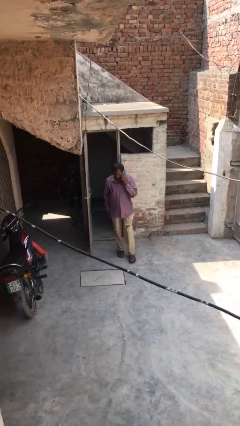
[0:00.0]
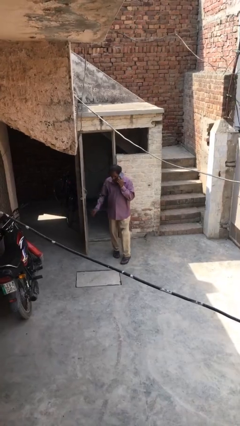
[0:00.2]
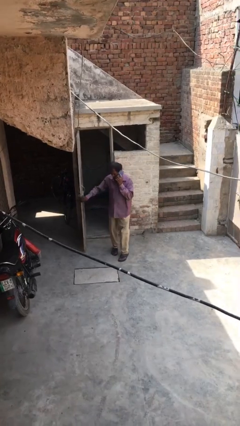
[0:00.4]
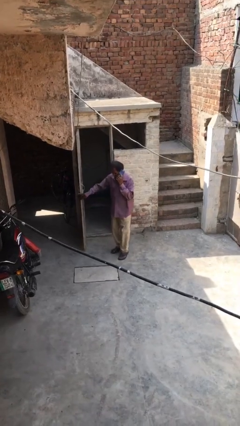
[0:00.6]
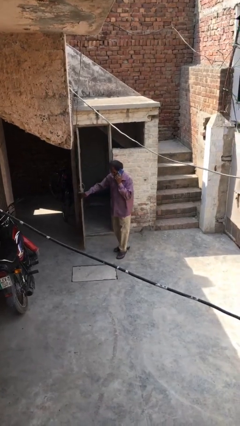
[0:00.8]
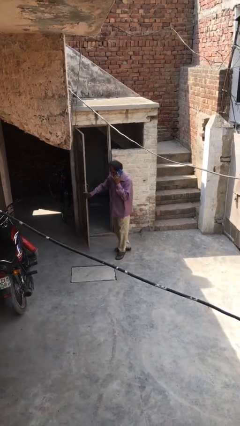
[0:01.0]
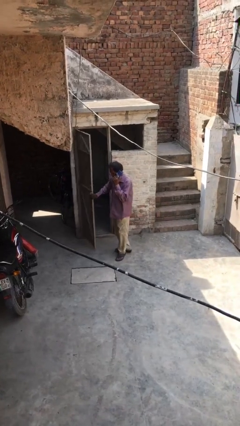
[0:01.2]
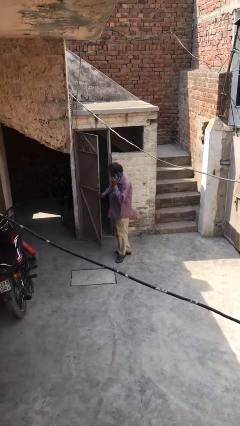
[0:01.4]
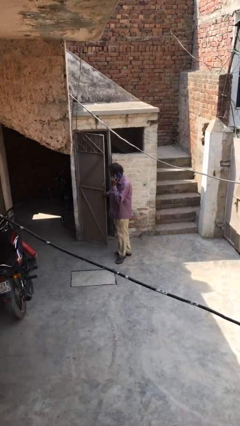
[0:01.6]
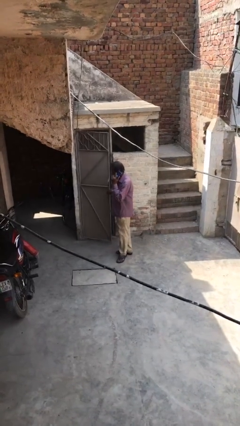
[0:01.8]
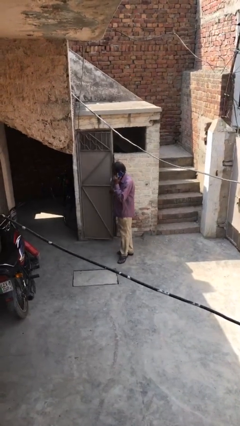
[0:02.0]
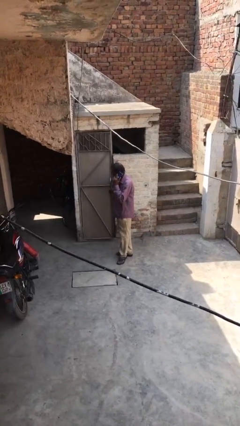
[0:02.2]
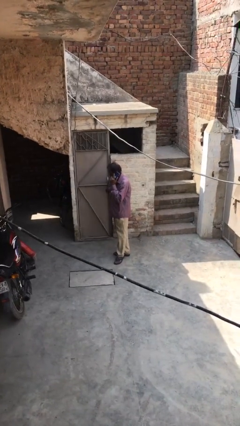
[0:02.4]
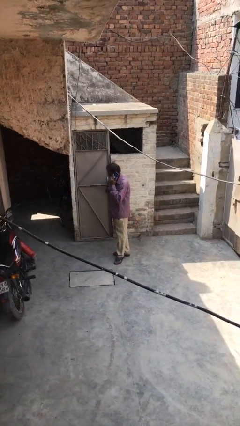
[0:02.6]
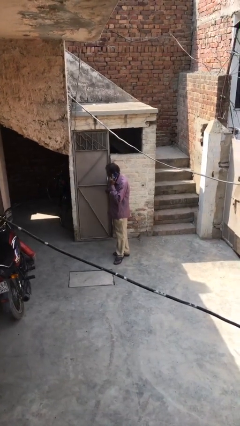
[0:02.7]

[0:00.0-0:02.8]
person closes facility door

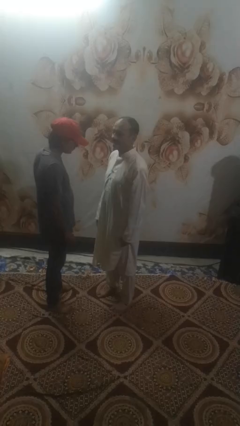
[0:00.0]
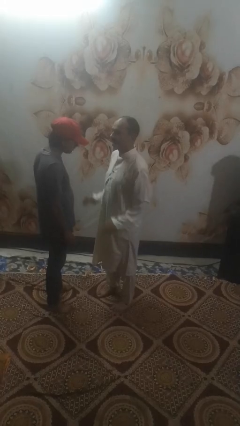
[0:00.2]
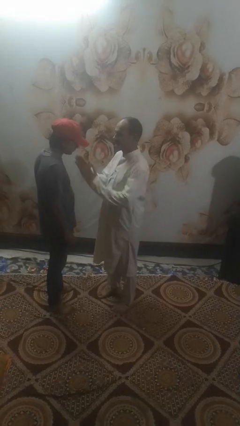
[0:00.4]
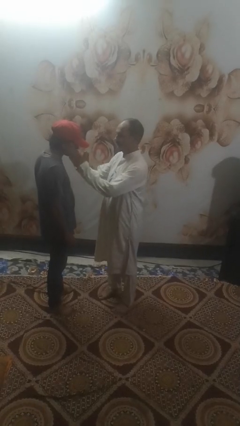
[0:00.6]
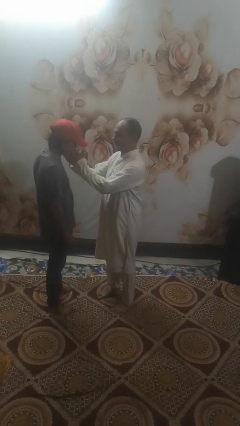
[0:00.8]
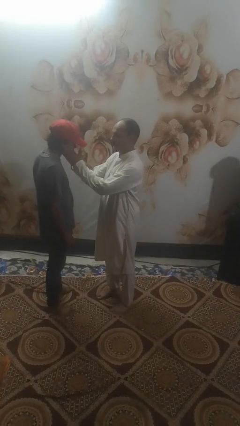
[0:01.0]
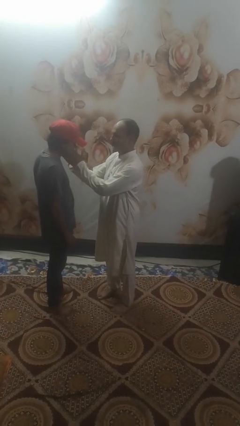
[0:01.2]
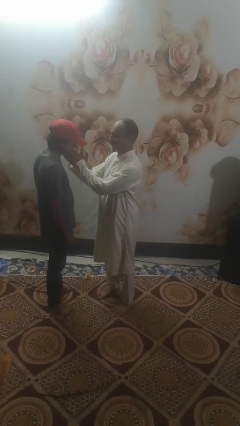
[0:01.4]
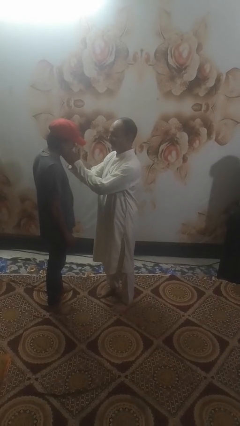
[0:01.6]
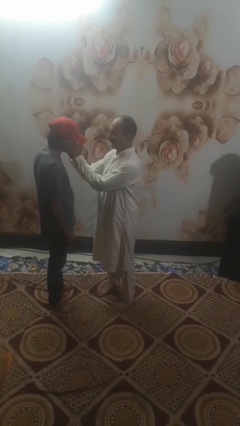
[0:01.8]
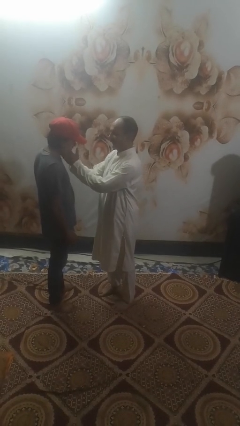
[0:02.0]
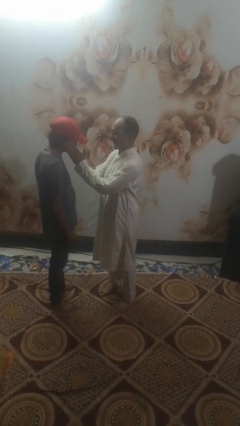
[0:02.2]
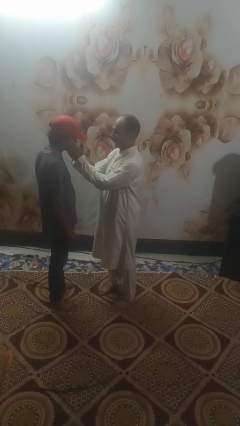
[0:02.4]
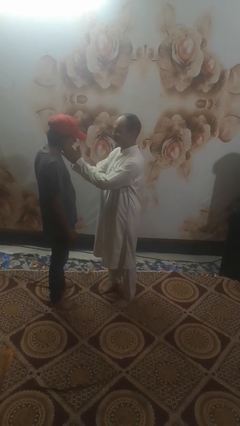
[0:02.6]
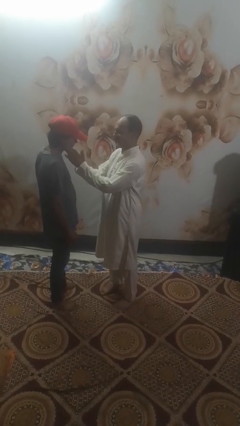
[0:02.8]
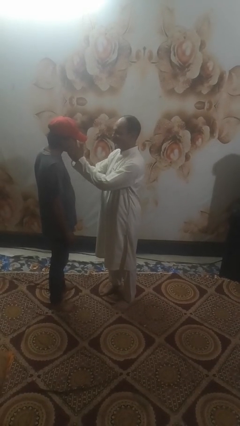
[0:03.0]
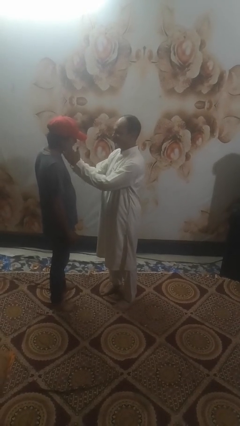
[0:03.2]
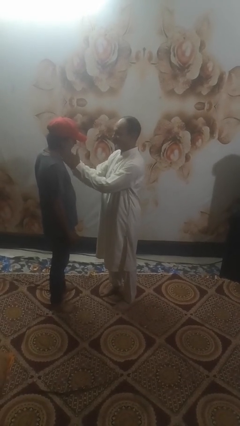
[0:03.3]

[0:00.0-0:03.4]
person touches face of person

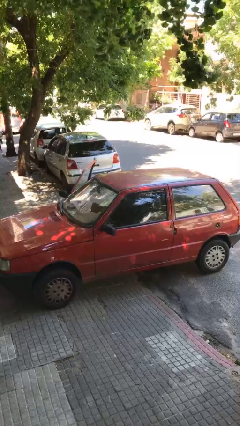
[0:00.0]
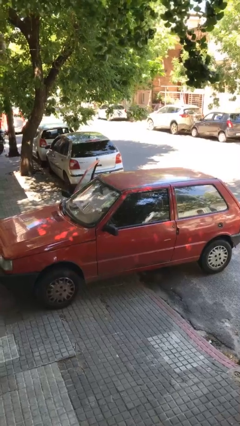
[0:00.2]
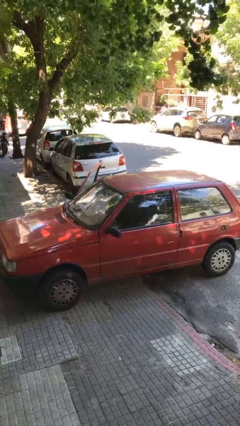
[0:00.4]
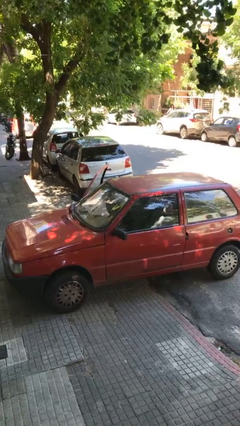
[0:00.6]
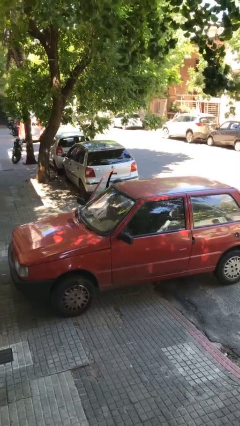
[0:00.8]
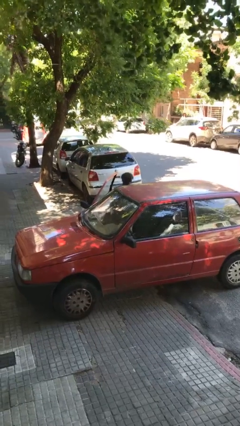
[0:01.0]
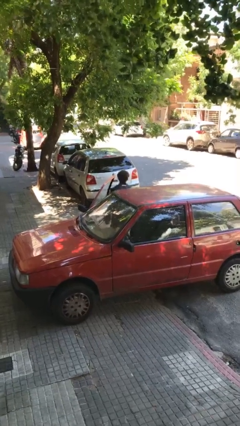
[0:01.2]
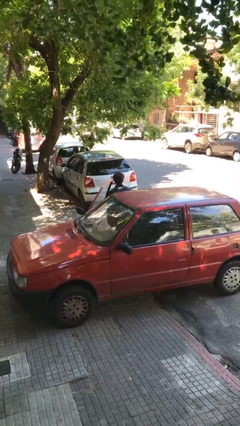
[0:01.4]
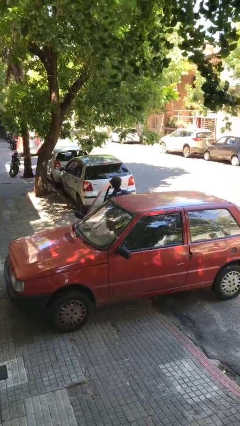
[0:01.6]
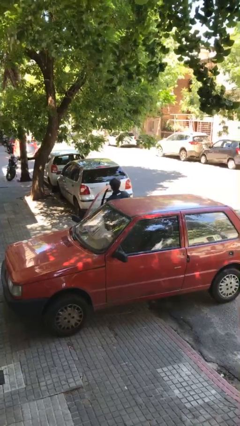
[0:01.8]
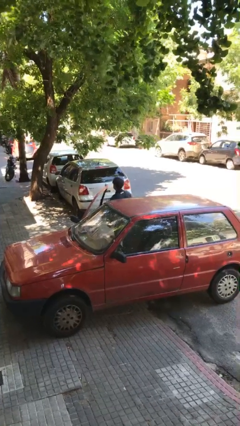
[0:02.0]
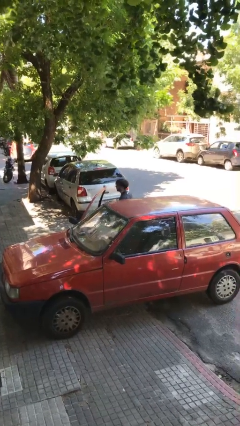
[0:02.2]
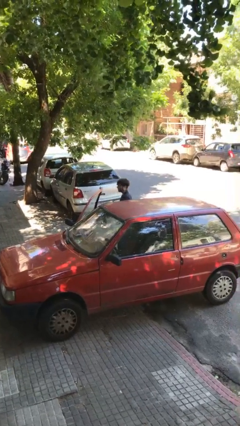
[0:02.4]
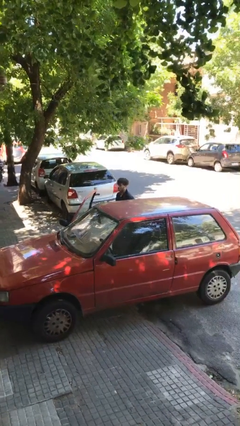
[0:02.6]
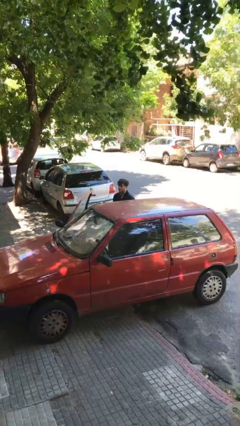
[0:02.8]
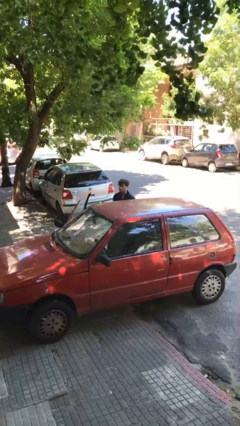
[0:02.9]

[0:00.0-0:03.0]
person exits car

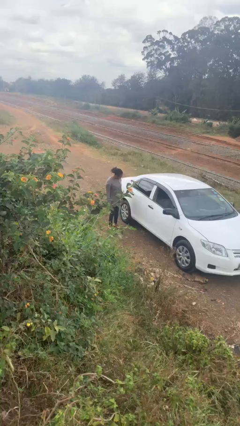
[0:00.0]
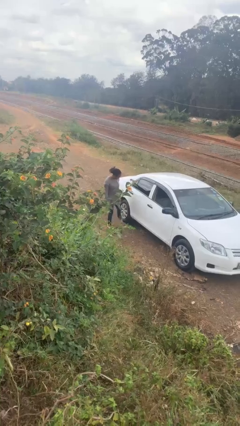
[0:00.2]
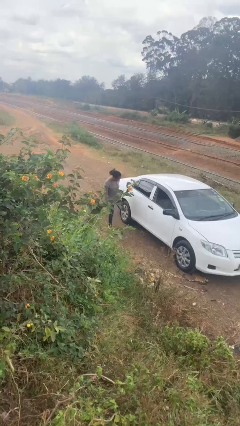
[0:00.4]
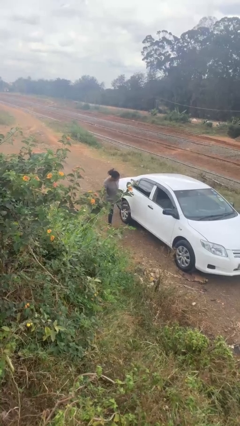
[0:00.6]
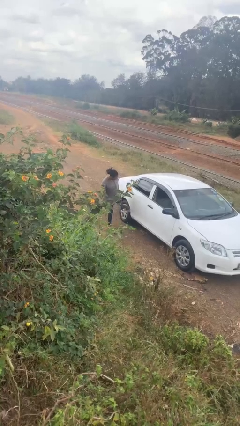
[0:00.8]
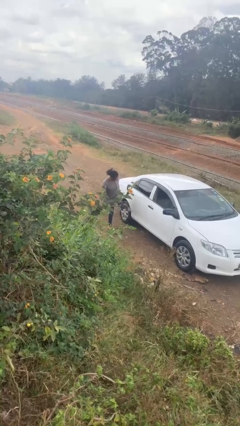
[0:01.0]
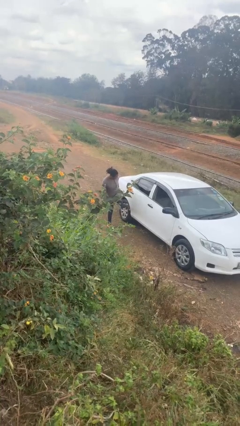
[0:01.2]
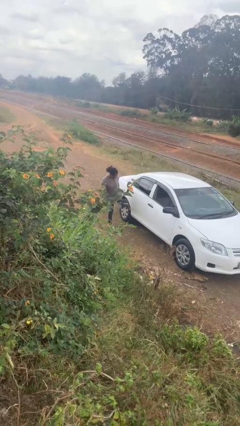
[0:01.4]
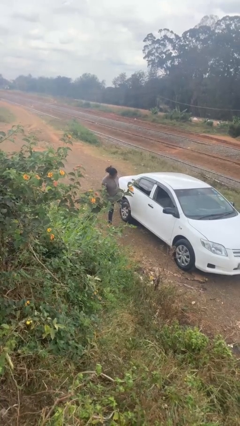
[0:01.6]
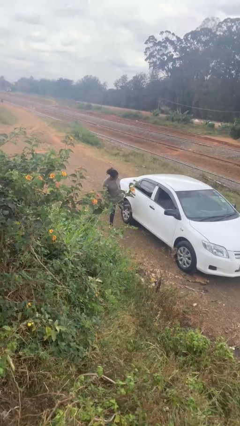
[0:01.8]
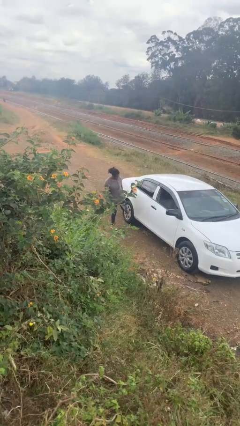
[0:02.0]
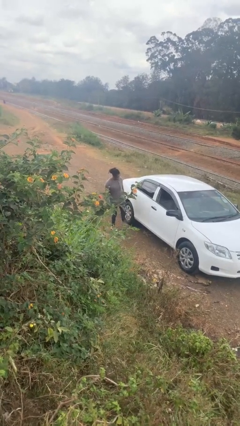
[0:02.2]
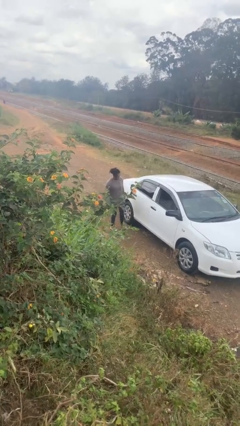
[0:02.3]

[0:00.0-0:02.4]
person kicks car tires

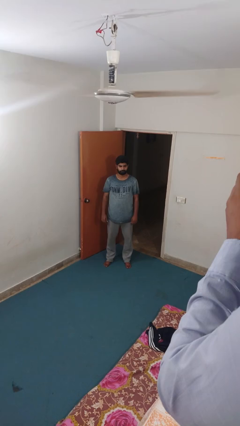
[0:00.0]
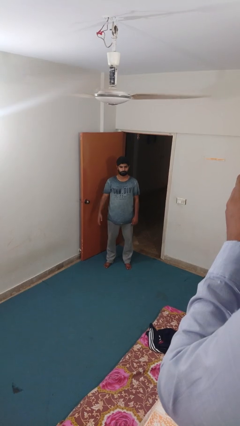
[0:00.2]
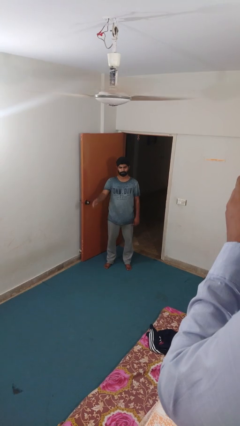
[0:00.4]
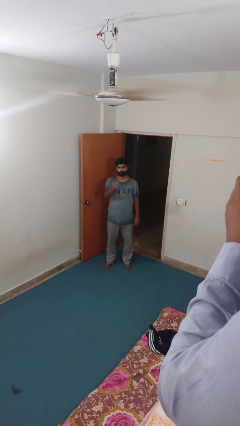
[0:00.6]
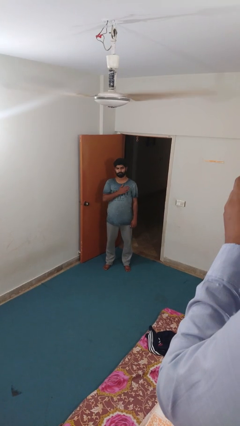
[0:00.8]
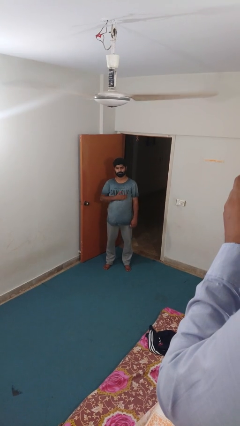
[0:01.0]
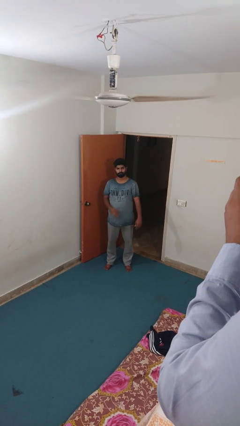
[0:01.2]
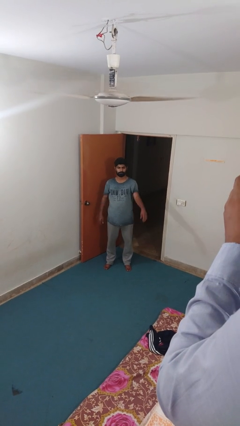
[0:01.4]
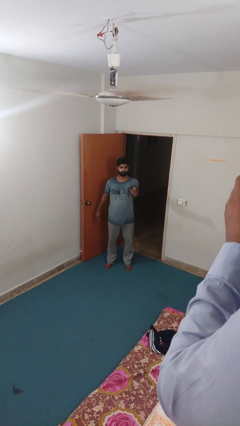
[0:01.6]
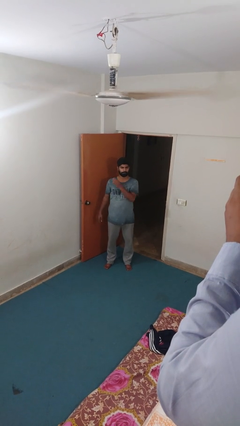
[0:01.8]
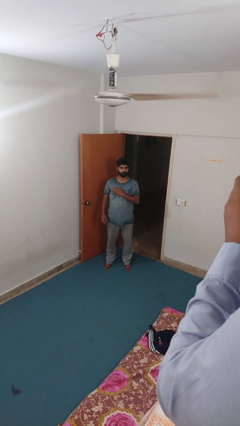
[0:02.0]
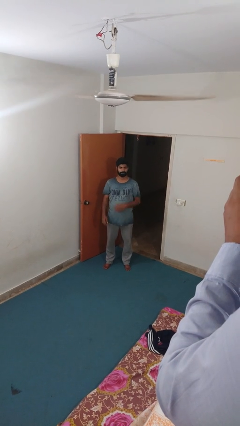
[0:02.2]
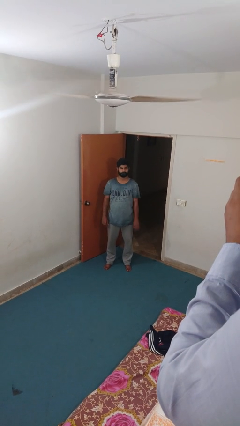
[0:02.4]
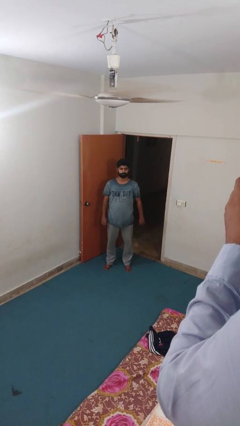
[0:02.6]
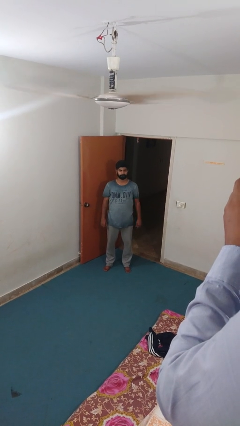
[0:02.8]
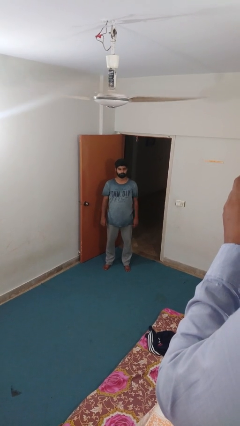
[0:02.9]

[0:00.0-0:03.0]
person drums on chest

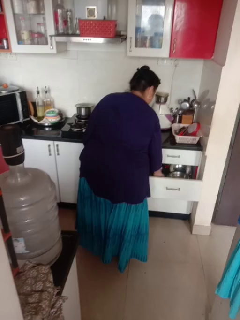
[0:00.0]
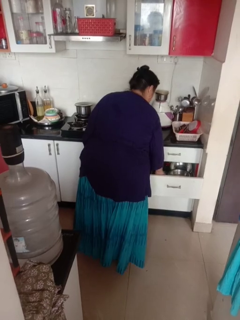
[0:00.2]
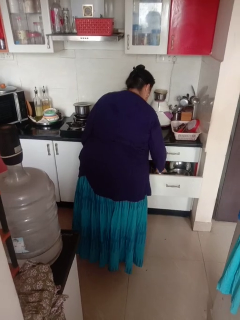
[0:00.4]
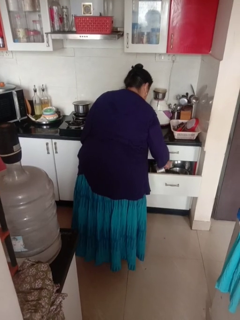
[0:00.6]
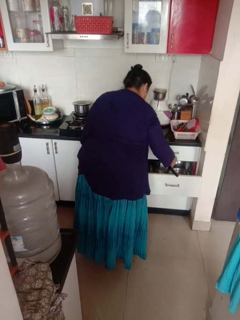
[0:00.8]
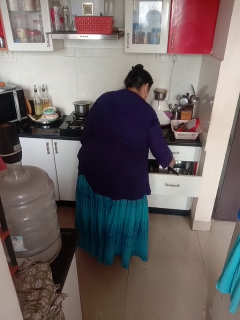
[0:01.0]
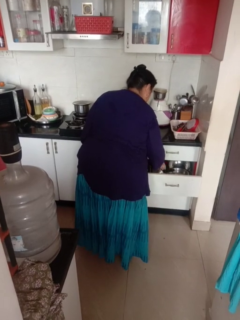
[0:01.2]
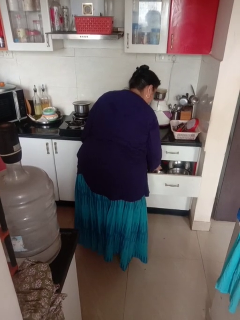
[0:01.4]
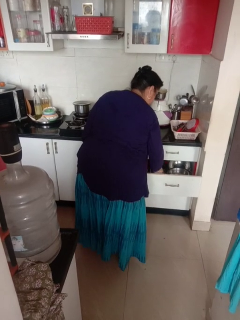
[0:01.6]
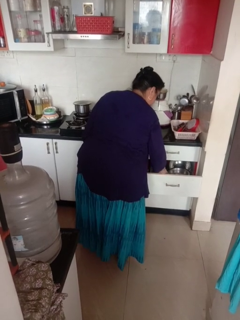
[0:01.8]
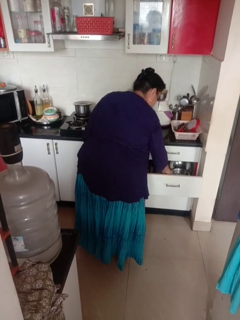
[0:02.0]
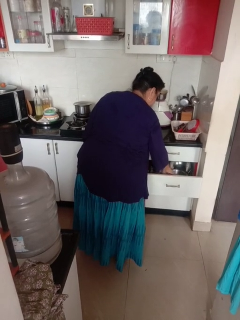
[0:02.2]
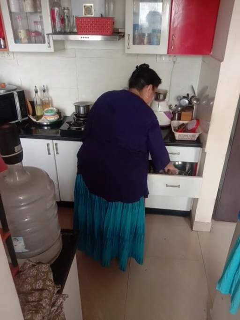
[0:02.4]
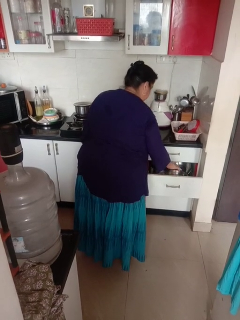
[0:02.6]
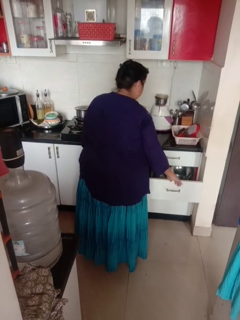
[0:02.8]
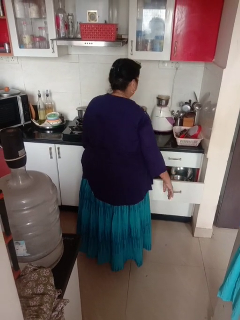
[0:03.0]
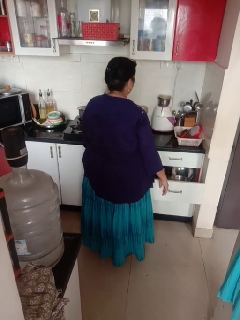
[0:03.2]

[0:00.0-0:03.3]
person searches in kitchen drawer

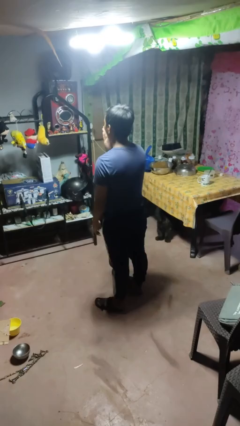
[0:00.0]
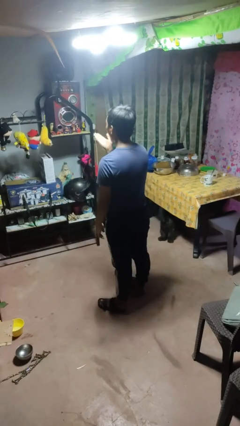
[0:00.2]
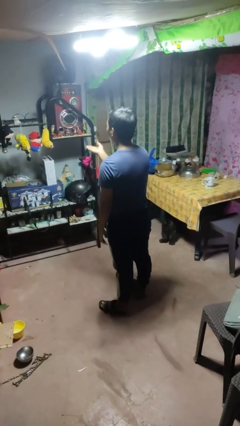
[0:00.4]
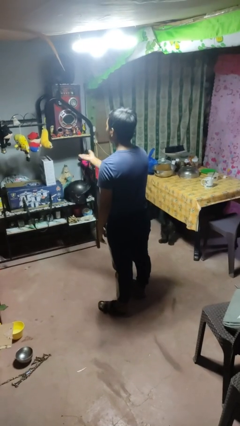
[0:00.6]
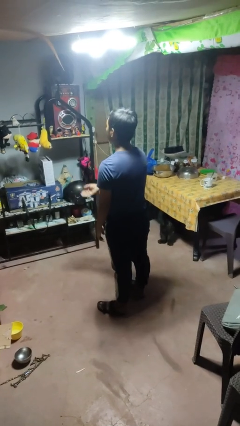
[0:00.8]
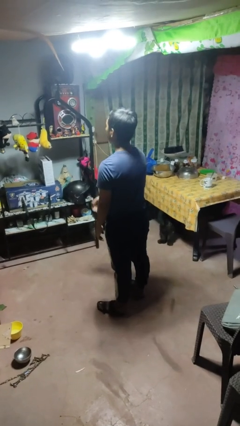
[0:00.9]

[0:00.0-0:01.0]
person gestures blow kiss
